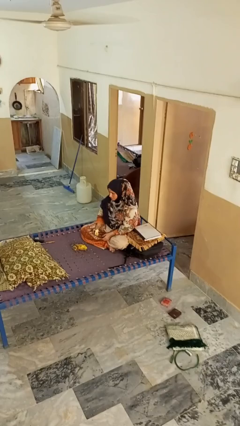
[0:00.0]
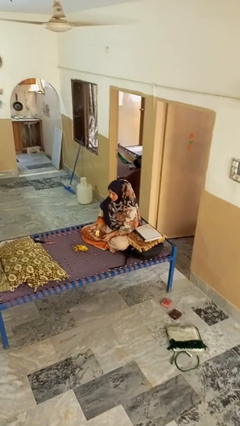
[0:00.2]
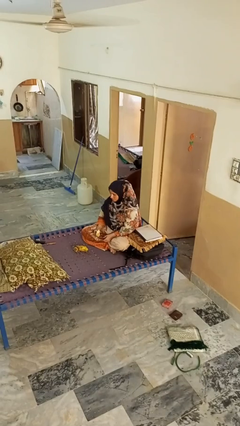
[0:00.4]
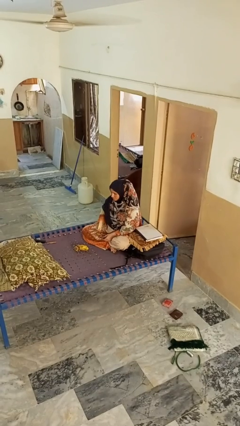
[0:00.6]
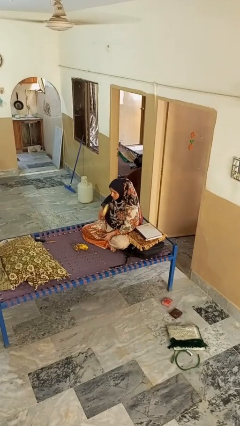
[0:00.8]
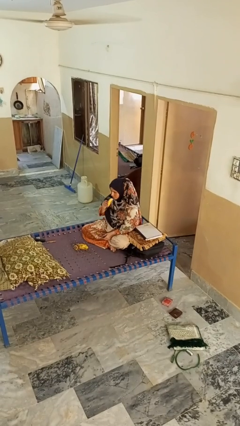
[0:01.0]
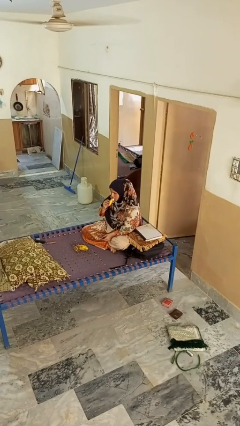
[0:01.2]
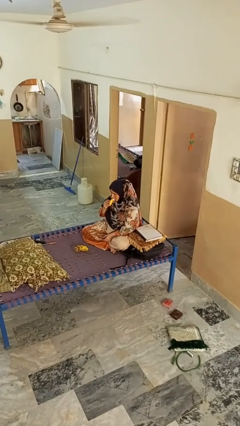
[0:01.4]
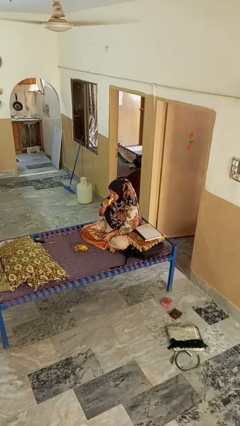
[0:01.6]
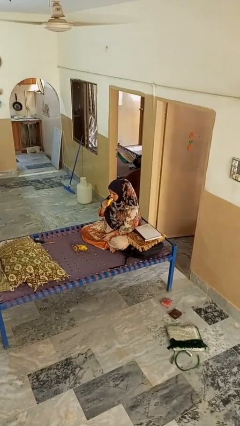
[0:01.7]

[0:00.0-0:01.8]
person eats banana

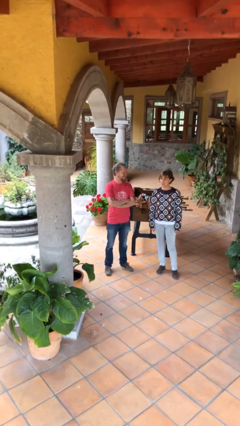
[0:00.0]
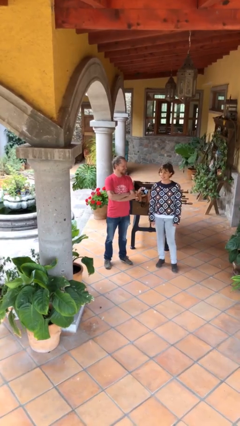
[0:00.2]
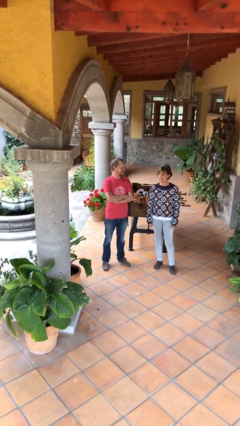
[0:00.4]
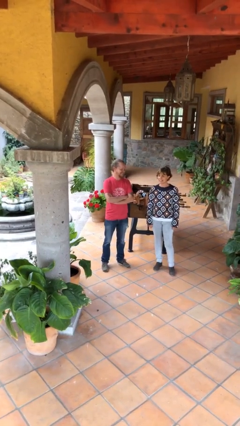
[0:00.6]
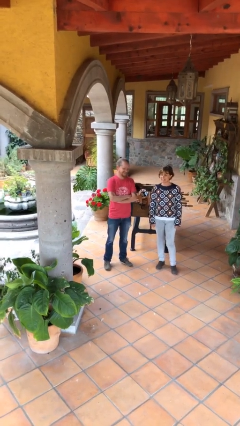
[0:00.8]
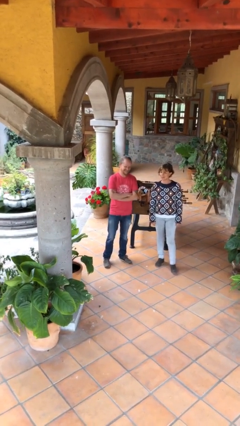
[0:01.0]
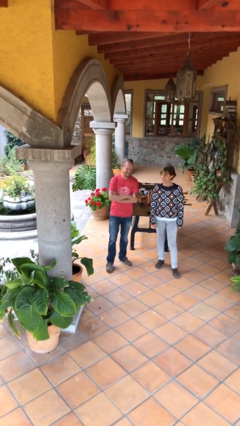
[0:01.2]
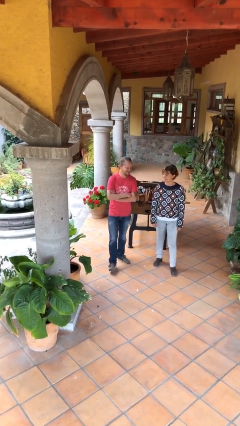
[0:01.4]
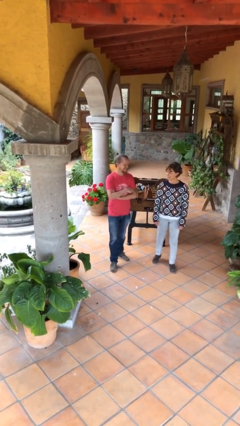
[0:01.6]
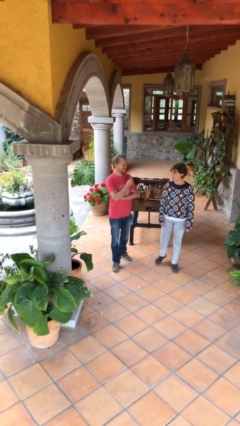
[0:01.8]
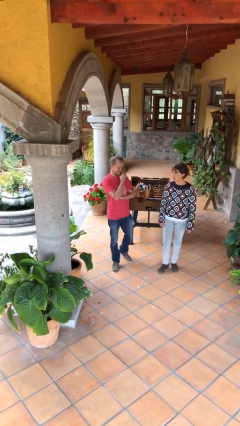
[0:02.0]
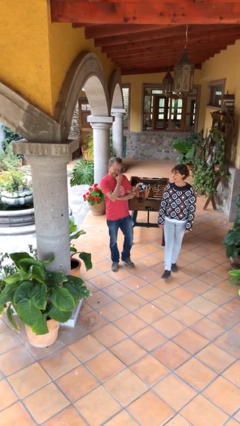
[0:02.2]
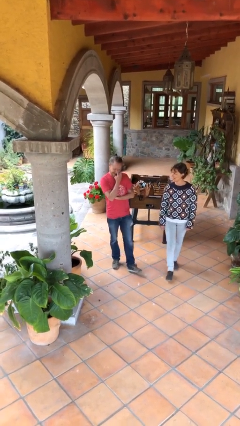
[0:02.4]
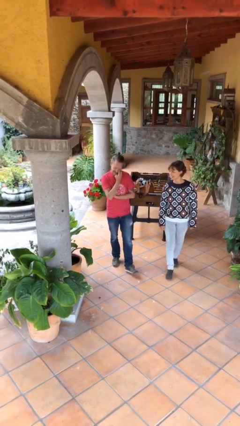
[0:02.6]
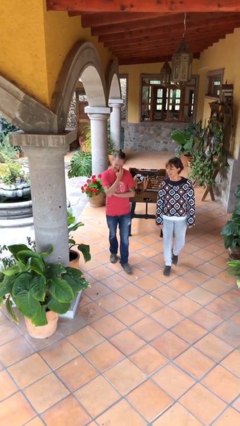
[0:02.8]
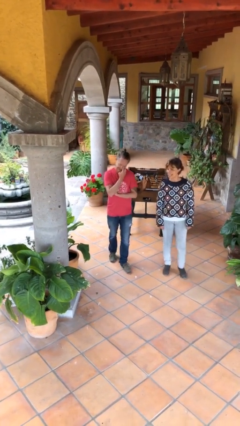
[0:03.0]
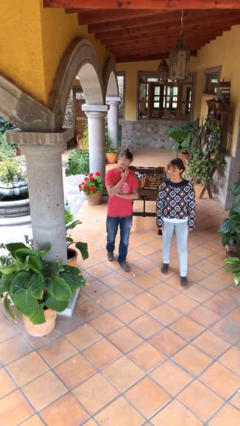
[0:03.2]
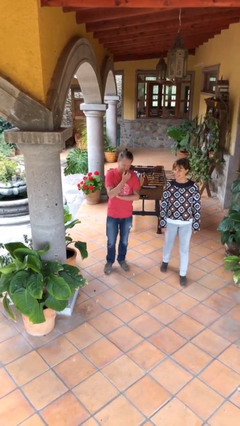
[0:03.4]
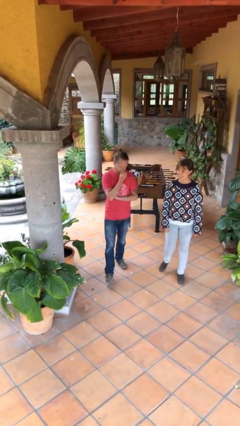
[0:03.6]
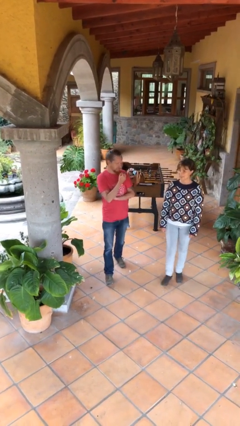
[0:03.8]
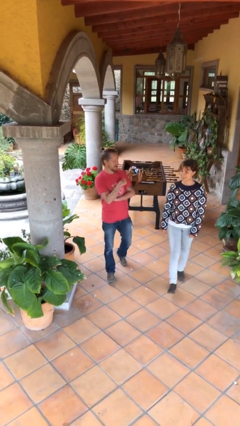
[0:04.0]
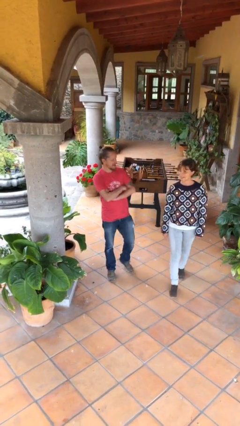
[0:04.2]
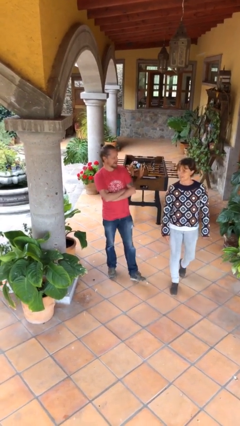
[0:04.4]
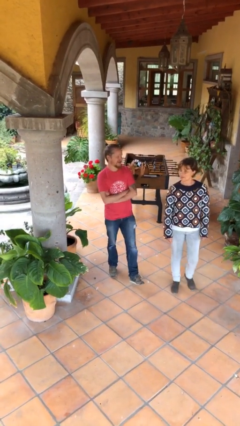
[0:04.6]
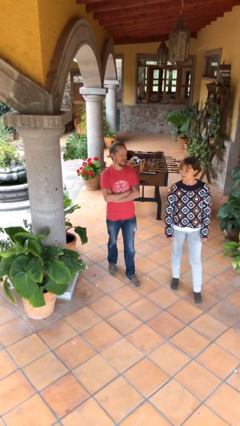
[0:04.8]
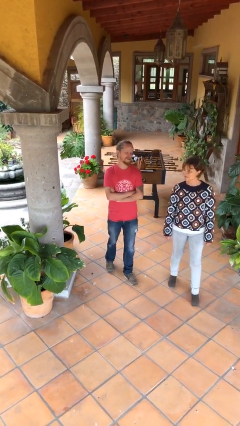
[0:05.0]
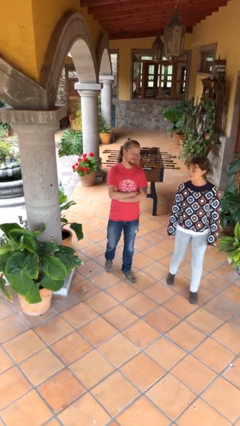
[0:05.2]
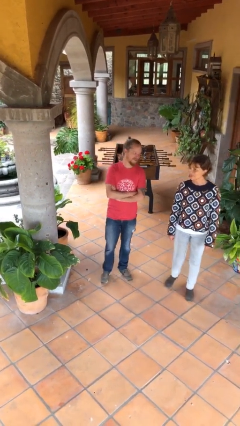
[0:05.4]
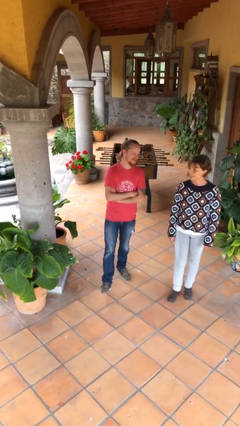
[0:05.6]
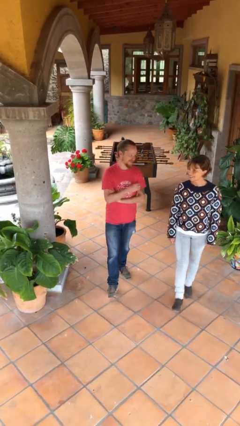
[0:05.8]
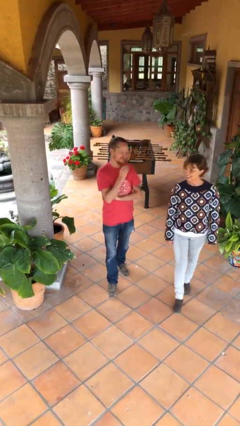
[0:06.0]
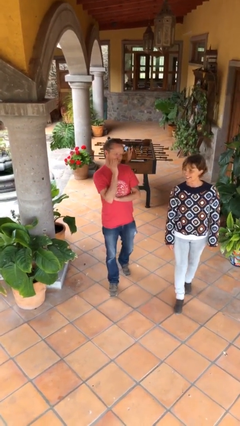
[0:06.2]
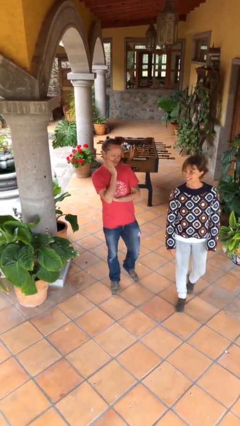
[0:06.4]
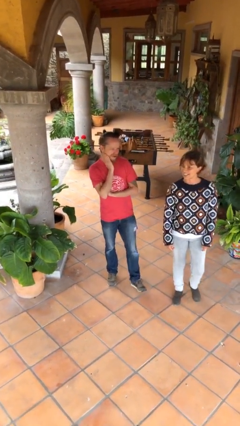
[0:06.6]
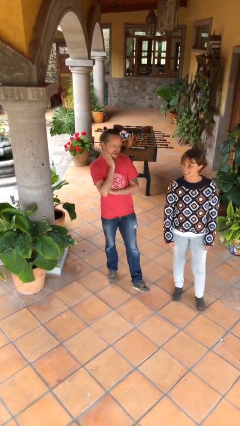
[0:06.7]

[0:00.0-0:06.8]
person talks to person

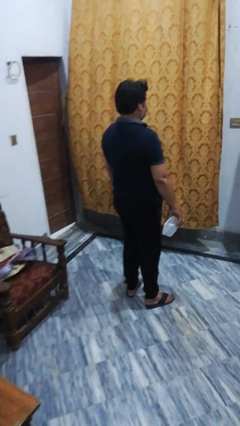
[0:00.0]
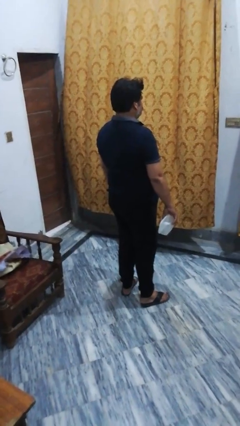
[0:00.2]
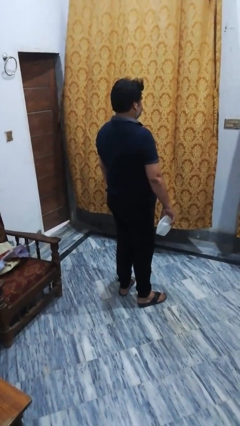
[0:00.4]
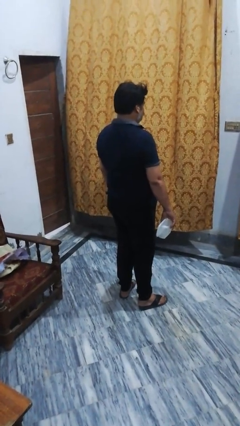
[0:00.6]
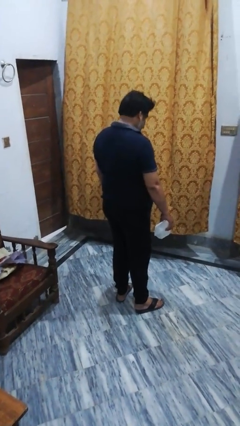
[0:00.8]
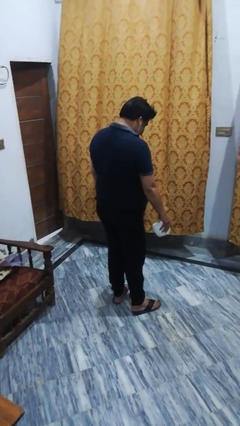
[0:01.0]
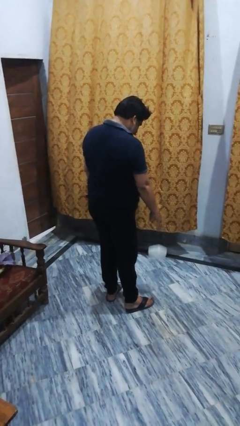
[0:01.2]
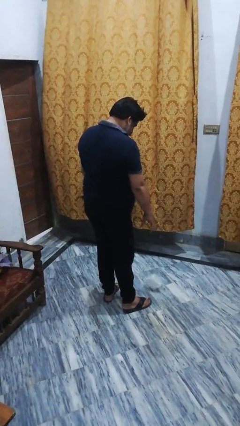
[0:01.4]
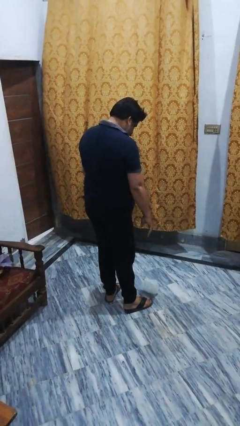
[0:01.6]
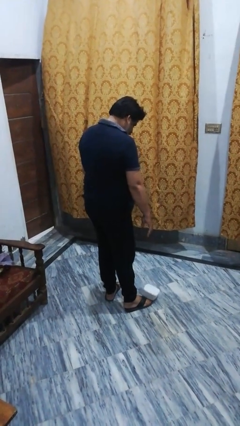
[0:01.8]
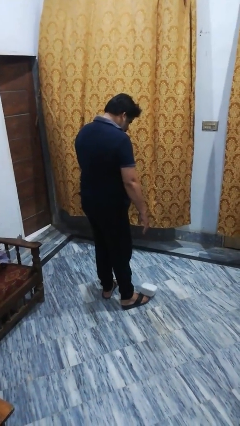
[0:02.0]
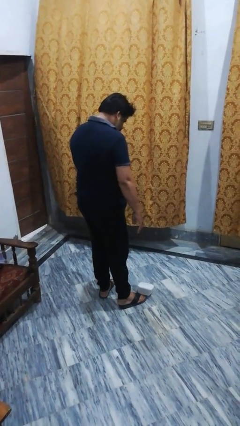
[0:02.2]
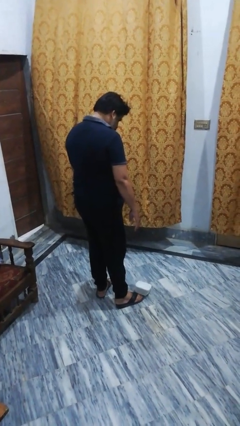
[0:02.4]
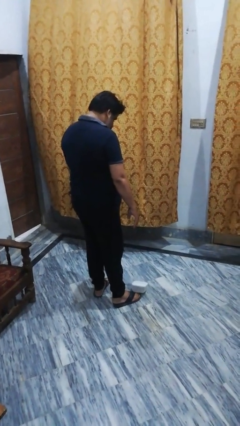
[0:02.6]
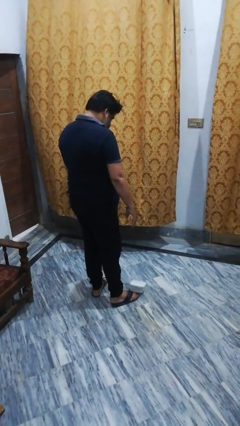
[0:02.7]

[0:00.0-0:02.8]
person throws object to ground

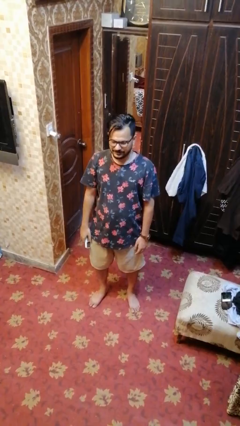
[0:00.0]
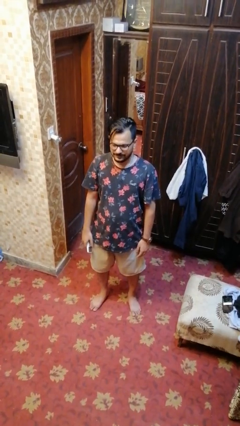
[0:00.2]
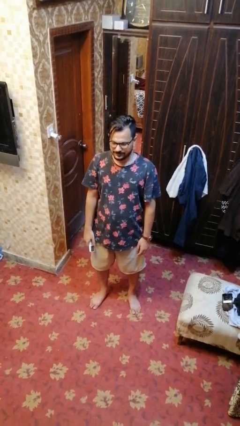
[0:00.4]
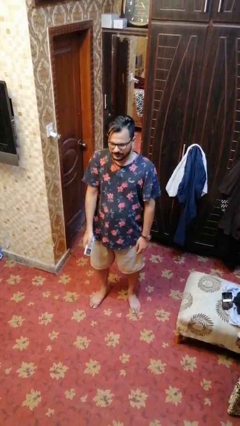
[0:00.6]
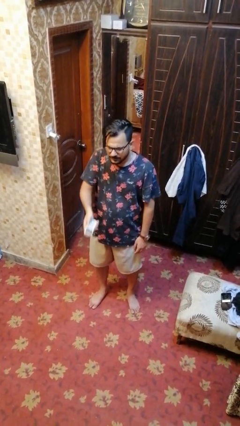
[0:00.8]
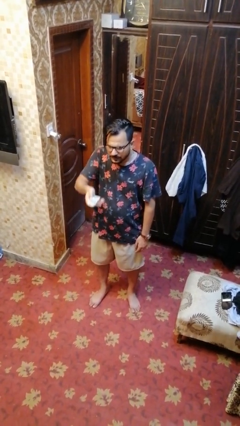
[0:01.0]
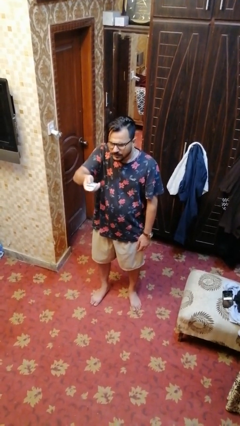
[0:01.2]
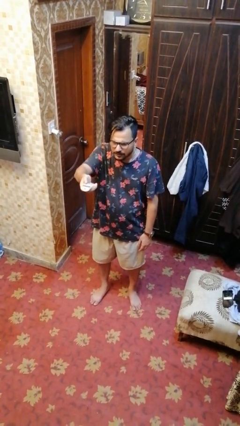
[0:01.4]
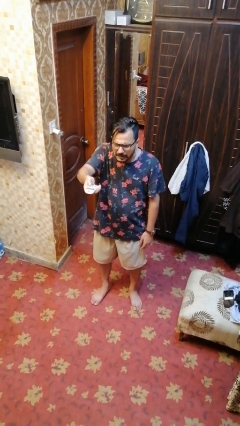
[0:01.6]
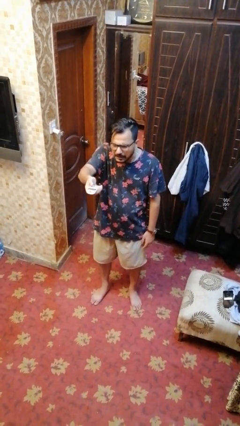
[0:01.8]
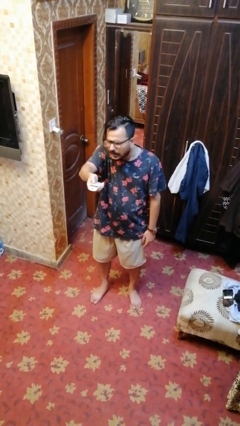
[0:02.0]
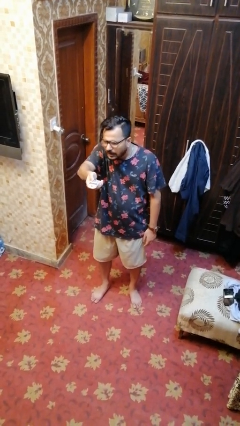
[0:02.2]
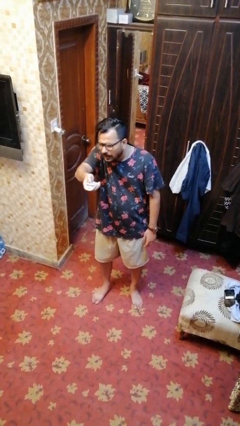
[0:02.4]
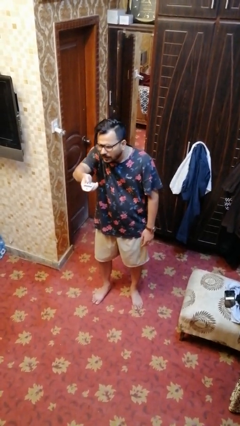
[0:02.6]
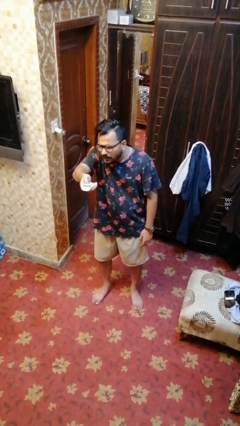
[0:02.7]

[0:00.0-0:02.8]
person uses television remote

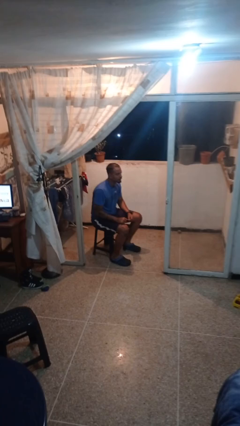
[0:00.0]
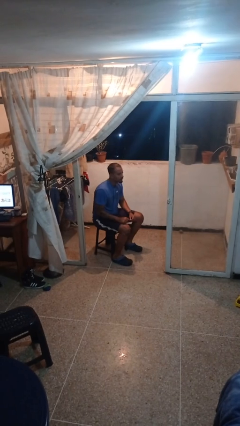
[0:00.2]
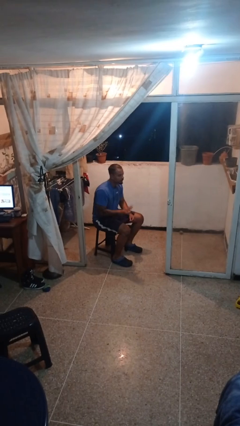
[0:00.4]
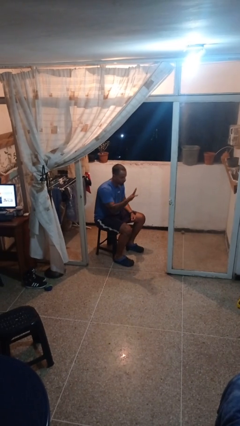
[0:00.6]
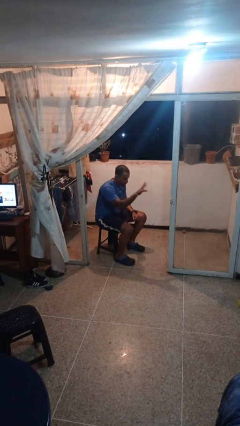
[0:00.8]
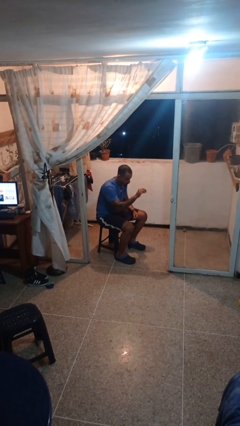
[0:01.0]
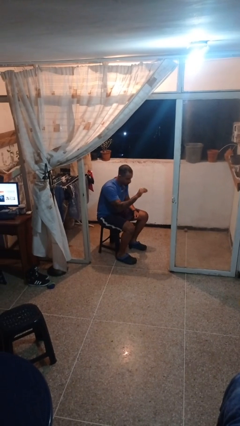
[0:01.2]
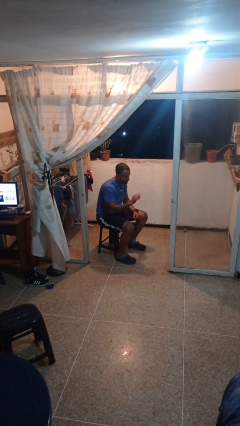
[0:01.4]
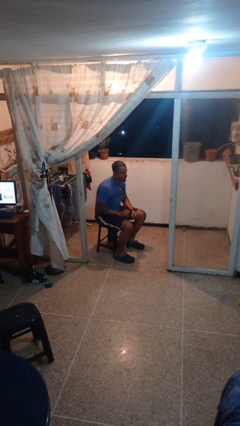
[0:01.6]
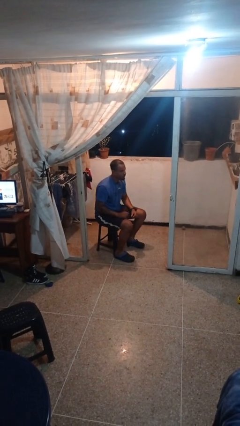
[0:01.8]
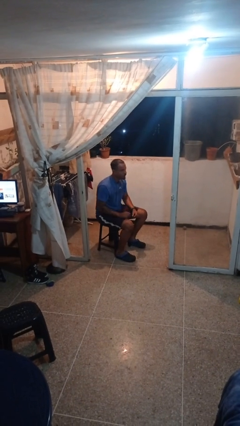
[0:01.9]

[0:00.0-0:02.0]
person gestures zoom out

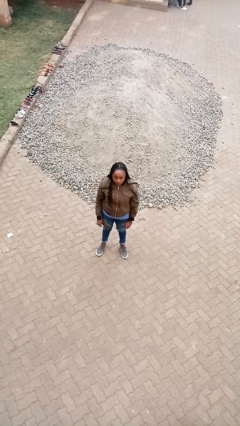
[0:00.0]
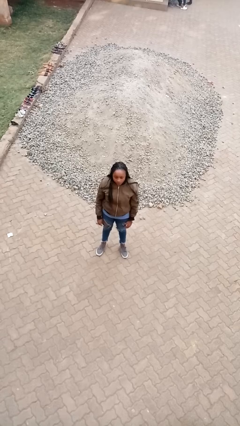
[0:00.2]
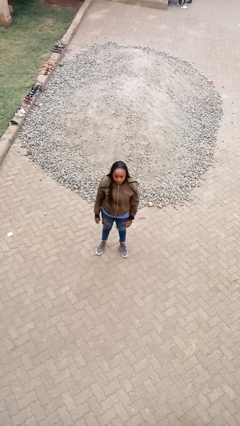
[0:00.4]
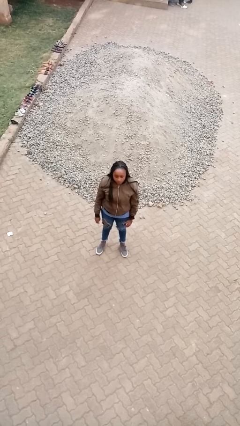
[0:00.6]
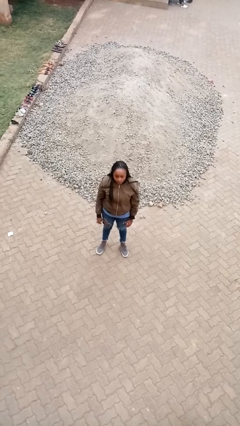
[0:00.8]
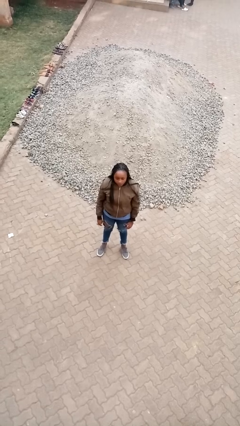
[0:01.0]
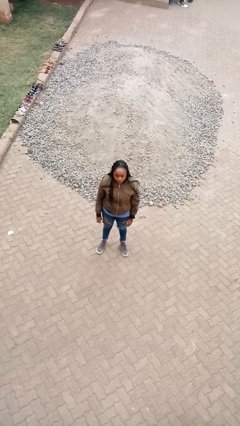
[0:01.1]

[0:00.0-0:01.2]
person gestures number one
